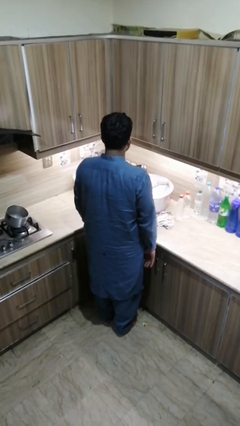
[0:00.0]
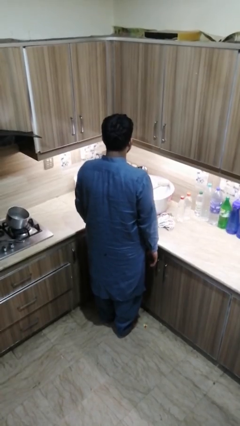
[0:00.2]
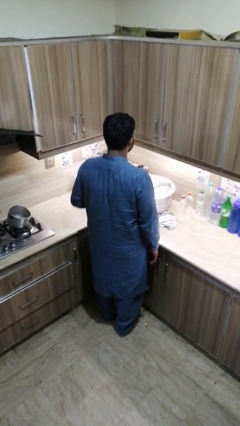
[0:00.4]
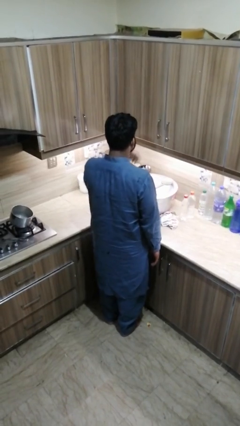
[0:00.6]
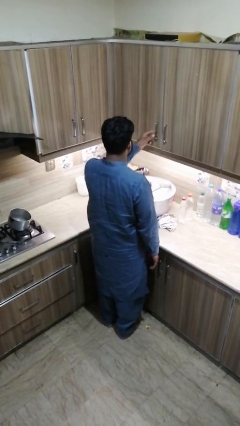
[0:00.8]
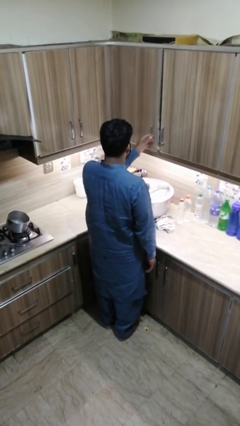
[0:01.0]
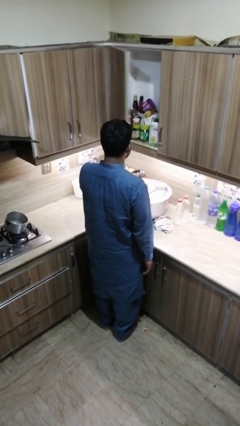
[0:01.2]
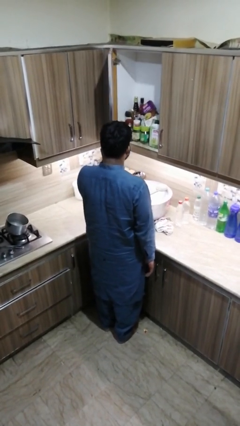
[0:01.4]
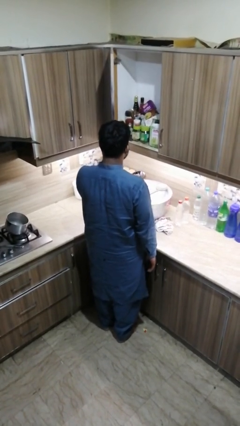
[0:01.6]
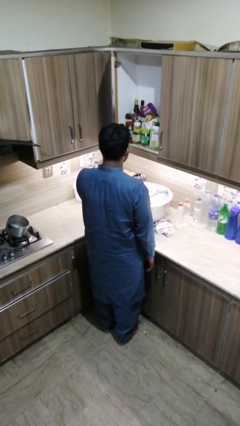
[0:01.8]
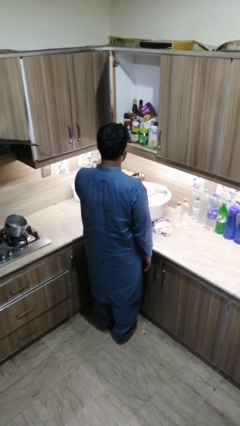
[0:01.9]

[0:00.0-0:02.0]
person opens kitchen drawer

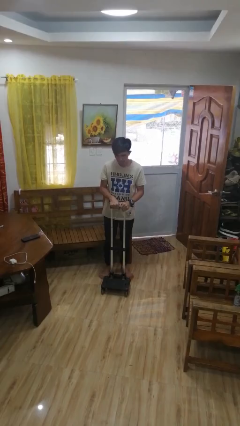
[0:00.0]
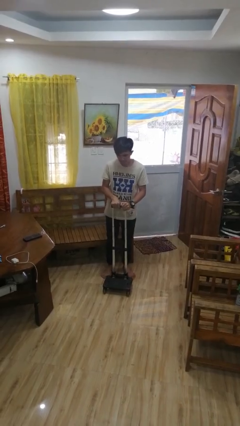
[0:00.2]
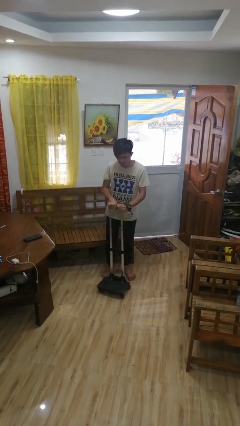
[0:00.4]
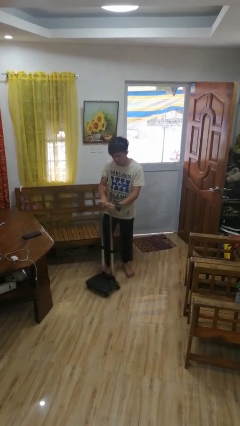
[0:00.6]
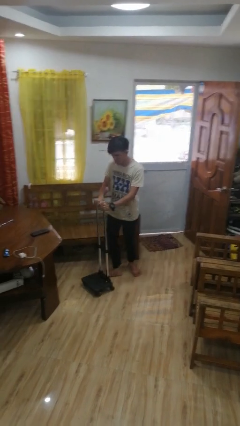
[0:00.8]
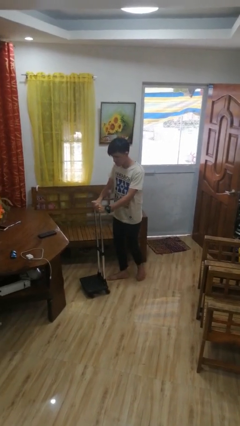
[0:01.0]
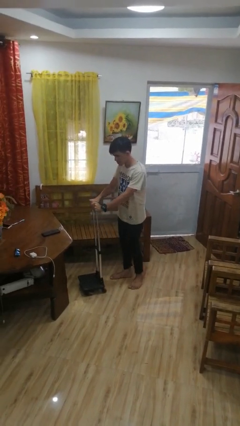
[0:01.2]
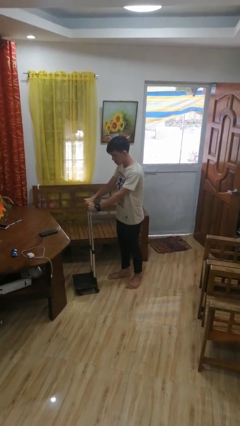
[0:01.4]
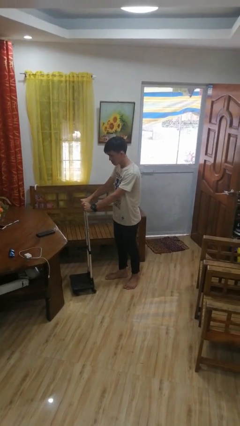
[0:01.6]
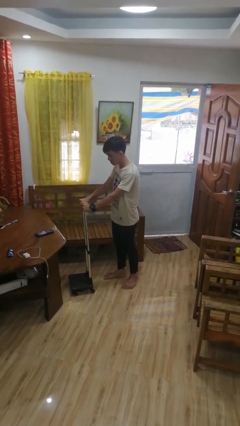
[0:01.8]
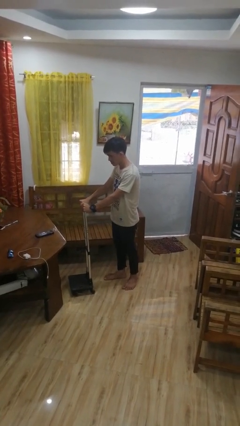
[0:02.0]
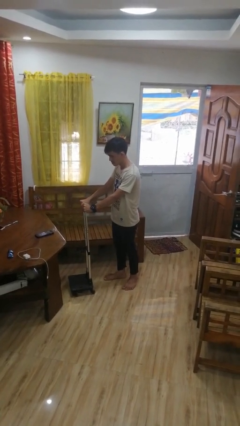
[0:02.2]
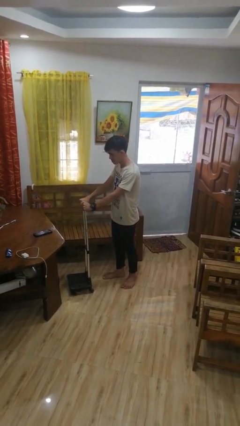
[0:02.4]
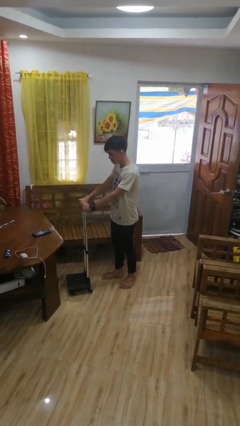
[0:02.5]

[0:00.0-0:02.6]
person pushes wheeled cart

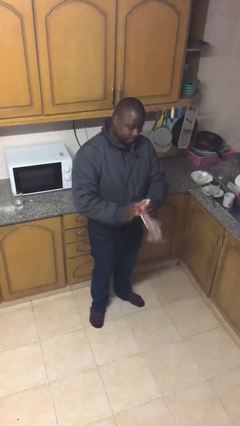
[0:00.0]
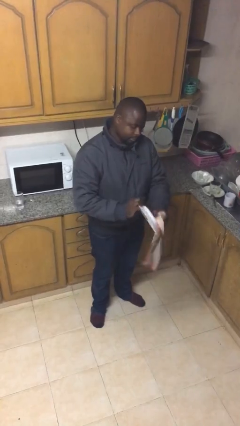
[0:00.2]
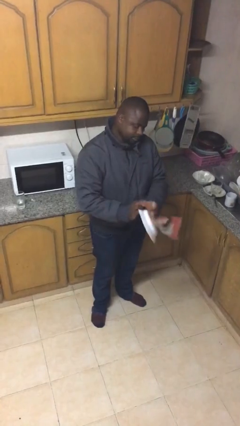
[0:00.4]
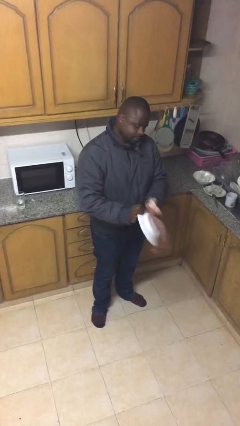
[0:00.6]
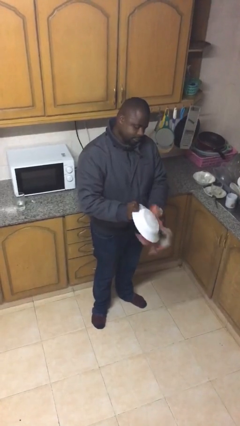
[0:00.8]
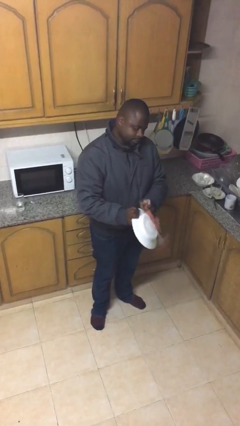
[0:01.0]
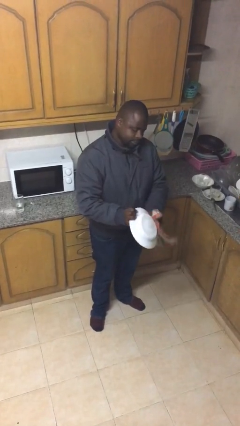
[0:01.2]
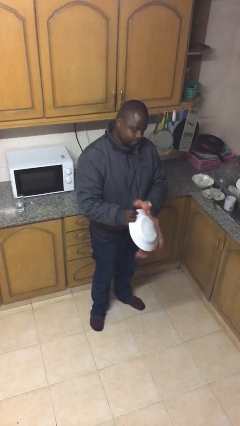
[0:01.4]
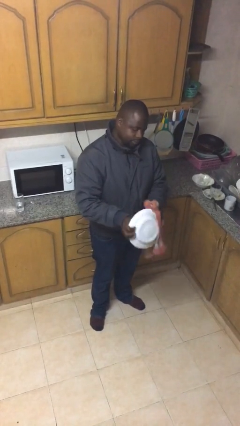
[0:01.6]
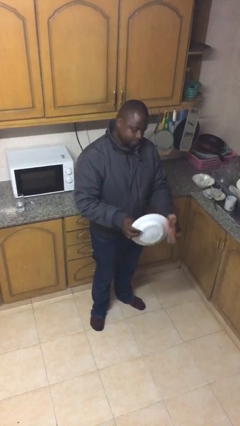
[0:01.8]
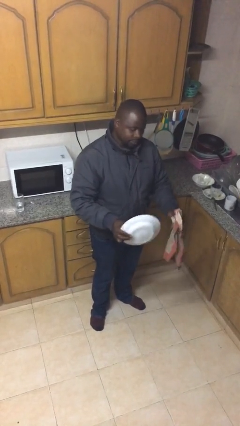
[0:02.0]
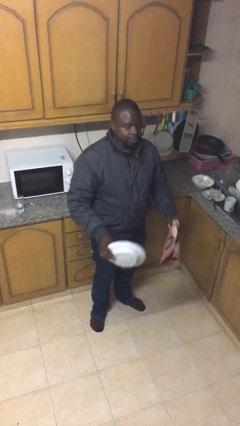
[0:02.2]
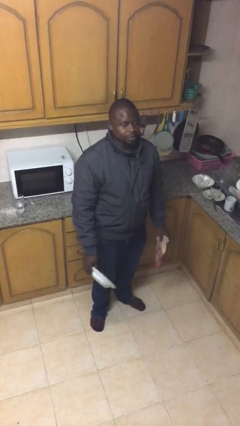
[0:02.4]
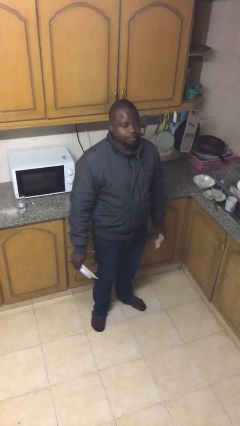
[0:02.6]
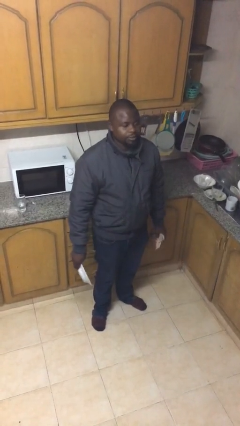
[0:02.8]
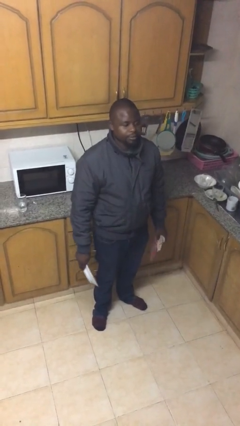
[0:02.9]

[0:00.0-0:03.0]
person dries dish

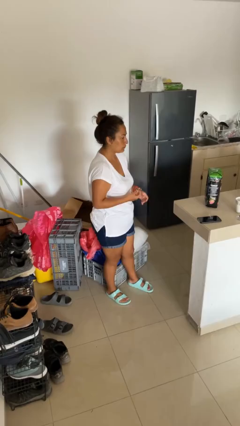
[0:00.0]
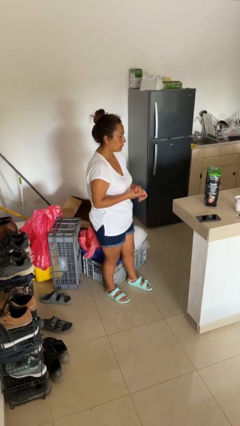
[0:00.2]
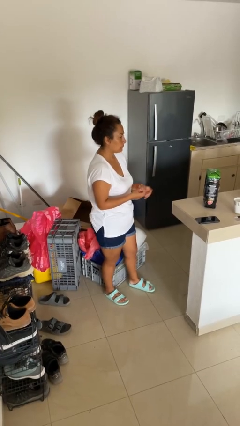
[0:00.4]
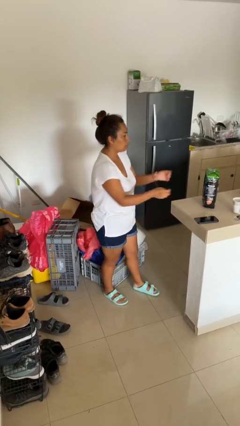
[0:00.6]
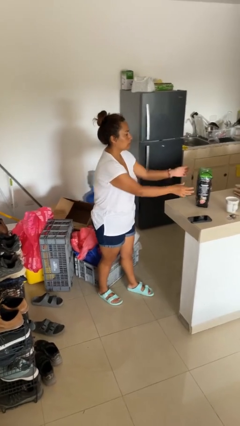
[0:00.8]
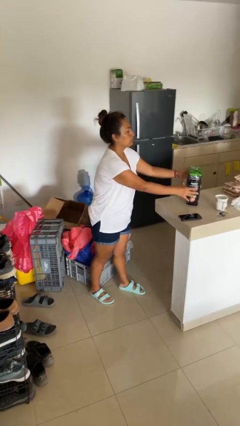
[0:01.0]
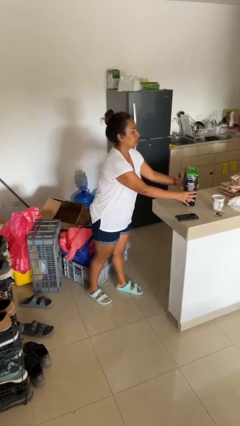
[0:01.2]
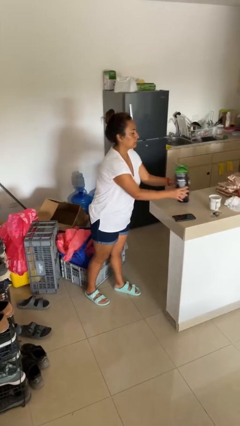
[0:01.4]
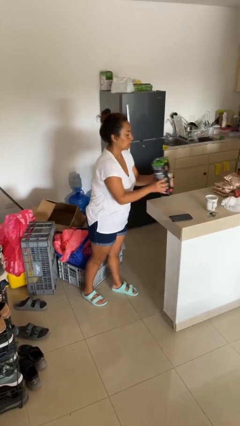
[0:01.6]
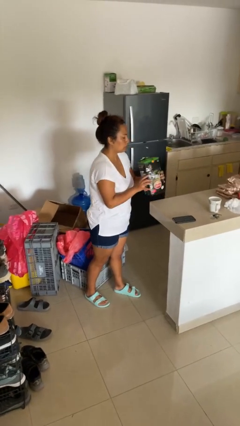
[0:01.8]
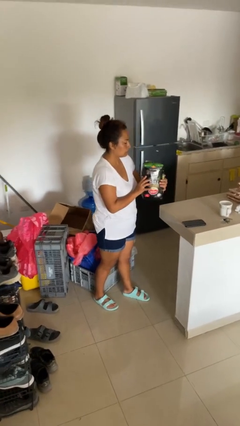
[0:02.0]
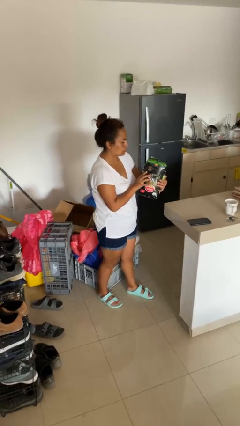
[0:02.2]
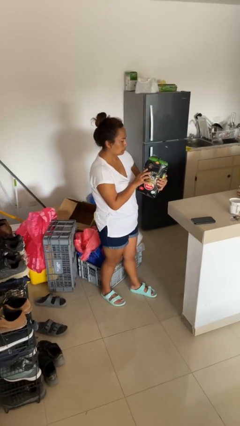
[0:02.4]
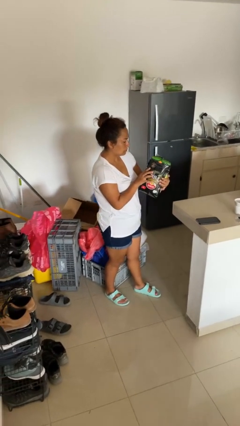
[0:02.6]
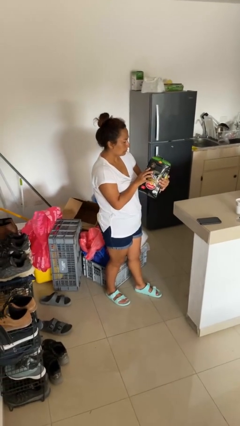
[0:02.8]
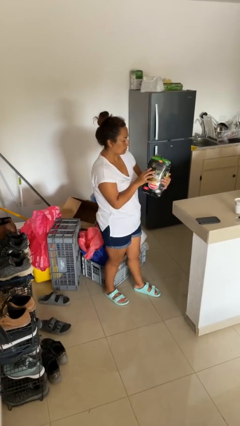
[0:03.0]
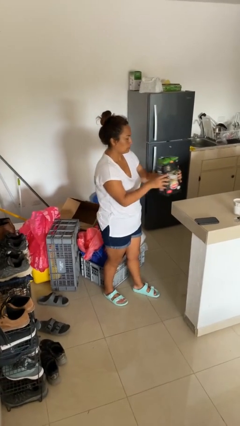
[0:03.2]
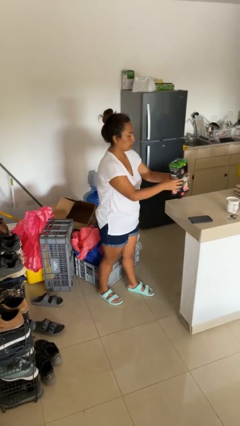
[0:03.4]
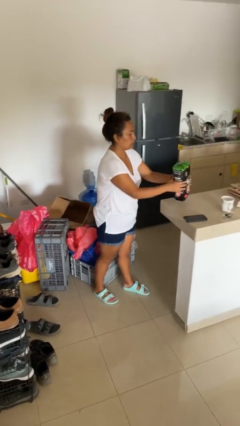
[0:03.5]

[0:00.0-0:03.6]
person picks up object from countertop

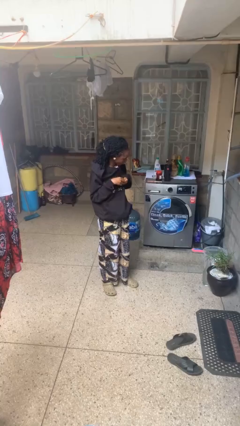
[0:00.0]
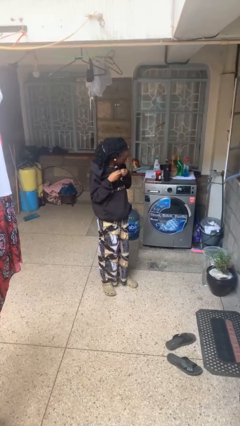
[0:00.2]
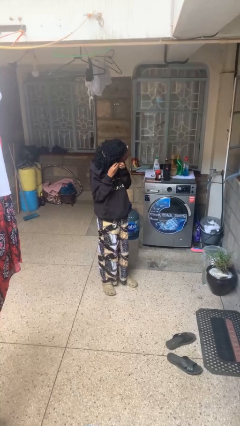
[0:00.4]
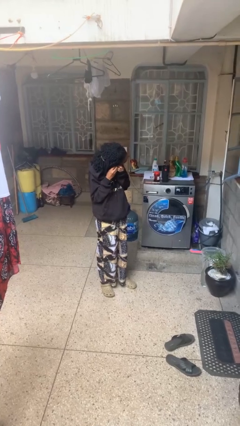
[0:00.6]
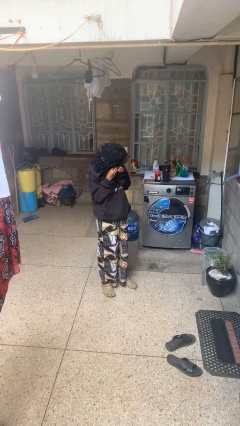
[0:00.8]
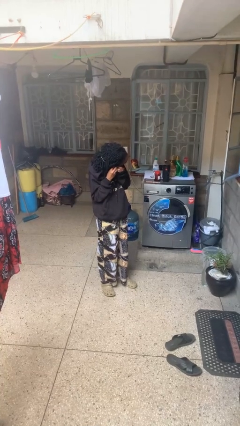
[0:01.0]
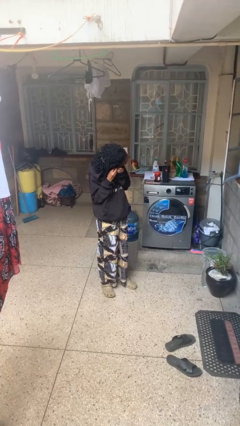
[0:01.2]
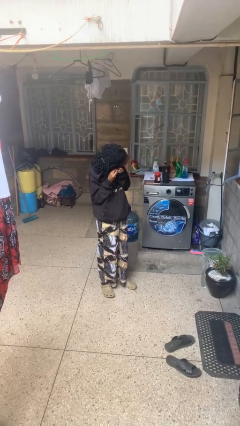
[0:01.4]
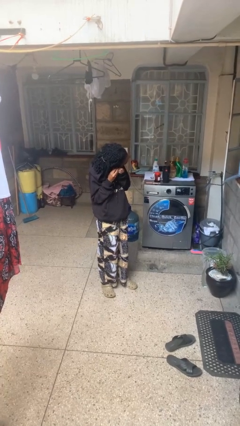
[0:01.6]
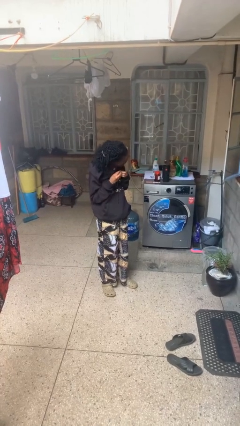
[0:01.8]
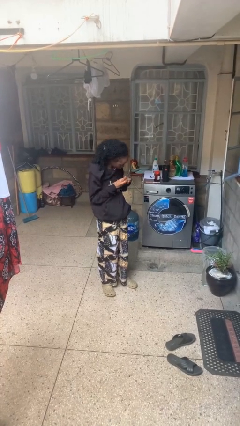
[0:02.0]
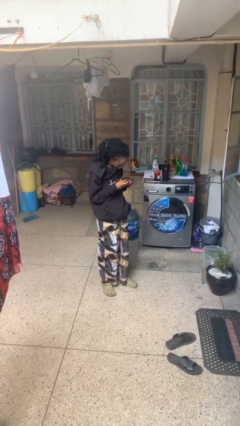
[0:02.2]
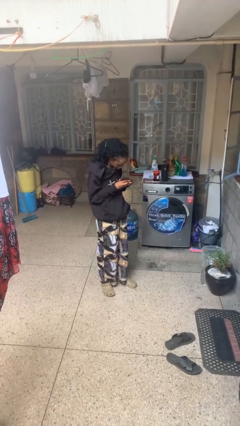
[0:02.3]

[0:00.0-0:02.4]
person takes off earrings

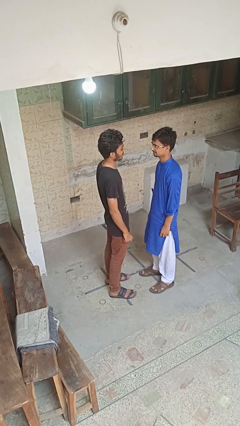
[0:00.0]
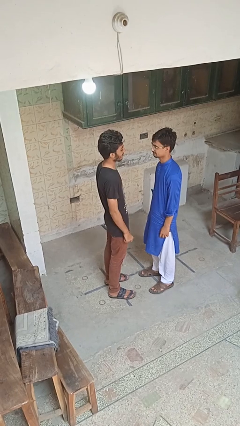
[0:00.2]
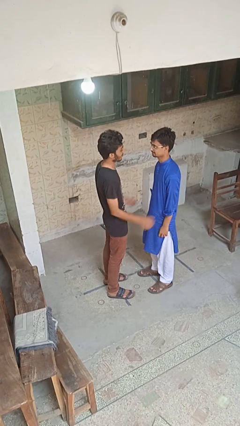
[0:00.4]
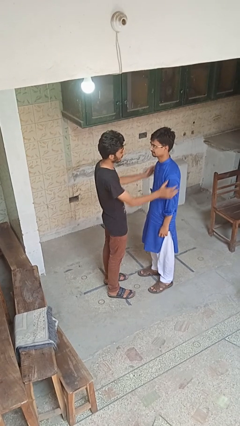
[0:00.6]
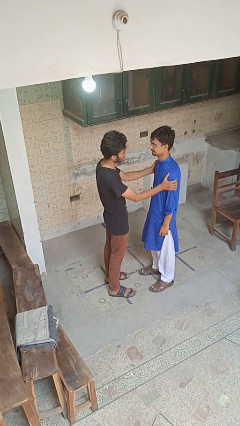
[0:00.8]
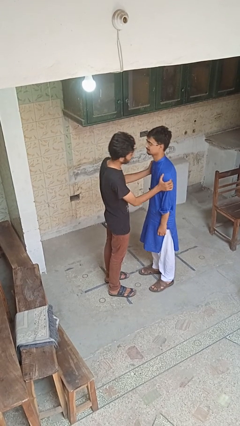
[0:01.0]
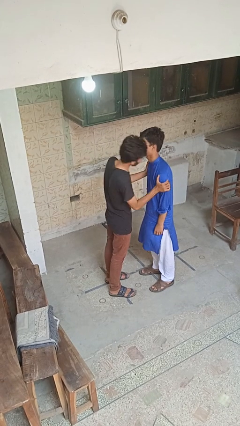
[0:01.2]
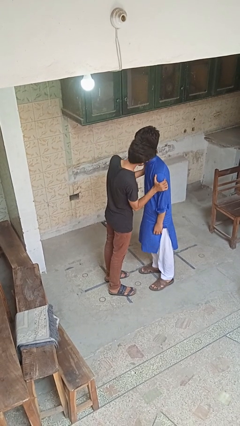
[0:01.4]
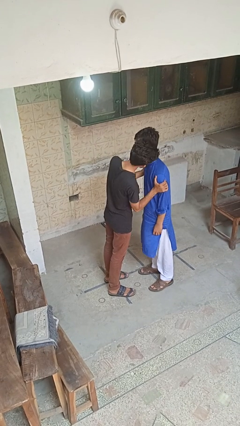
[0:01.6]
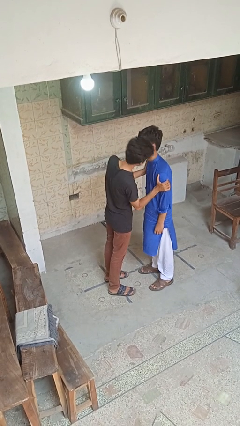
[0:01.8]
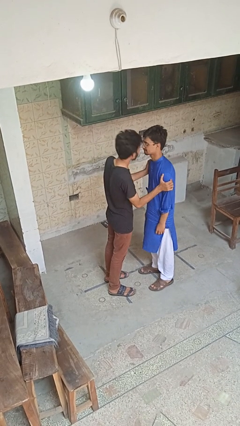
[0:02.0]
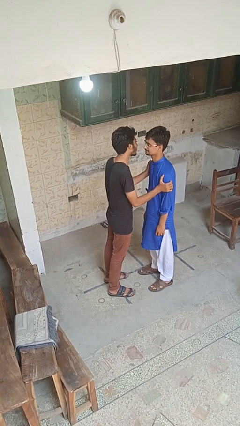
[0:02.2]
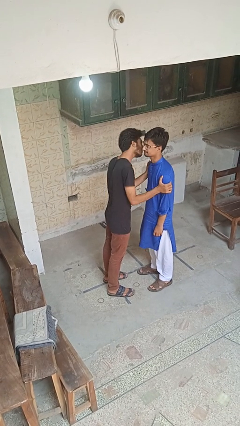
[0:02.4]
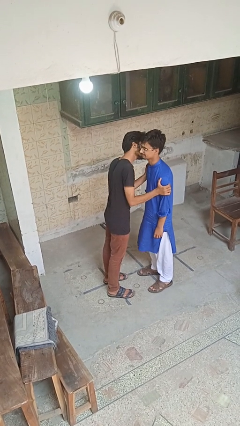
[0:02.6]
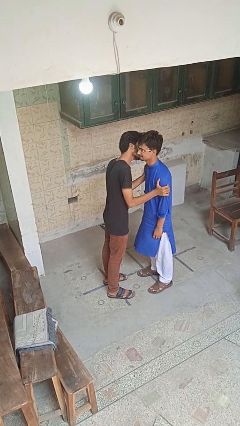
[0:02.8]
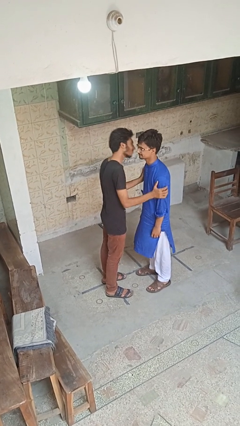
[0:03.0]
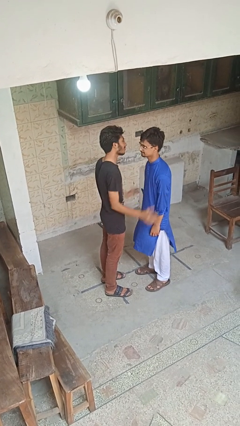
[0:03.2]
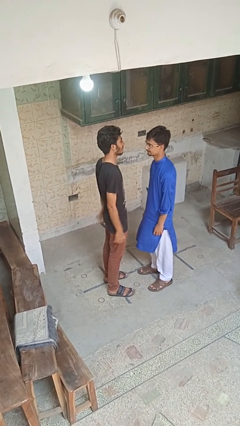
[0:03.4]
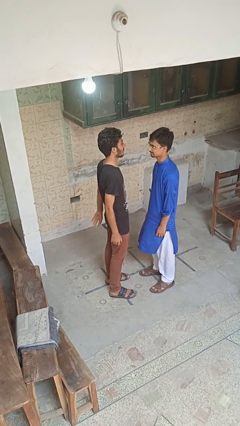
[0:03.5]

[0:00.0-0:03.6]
person kisses cheek of person

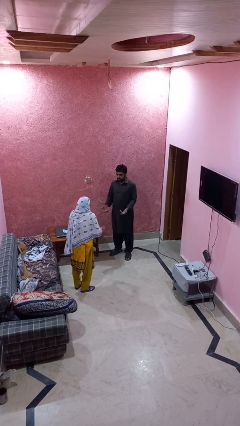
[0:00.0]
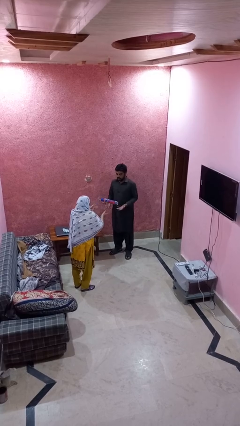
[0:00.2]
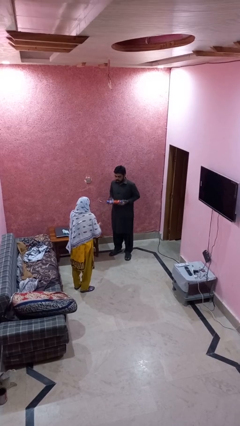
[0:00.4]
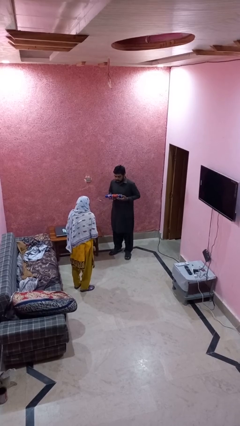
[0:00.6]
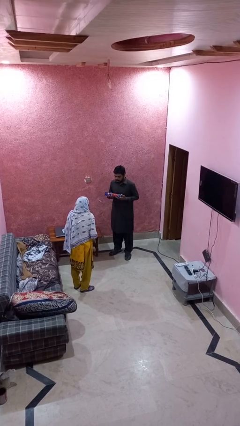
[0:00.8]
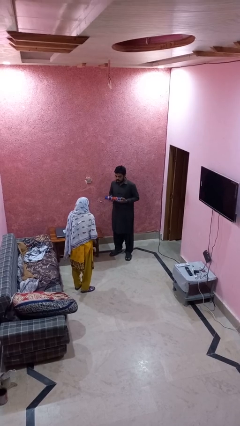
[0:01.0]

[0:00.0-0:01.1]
person catches object from person
